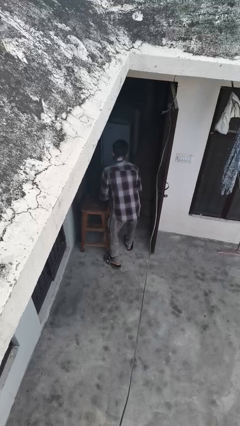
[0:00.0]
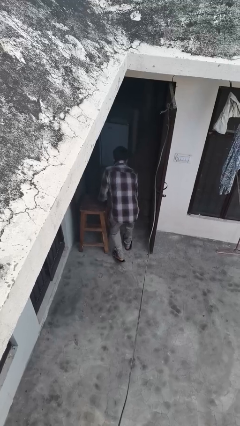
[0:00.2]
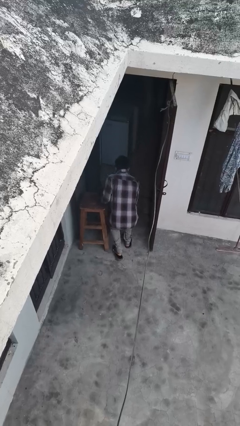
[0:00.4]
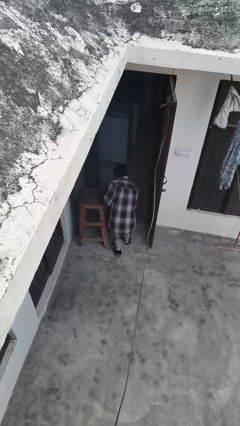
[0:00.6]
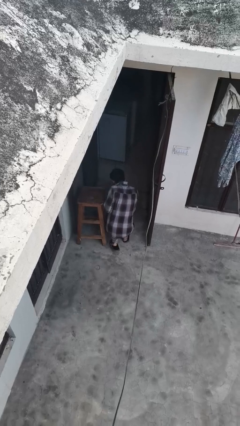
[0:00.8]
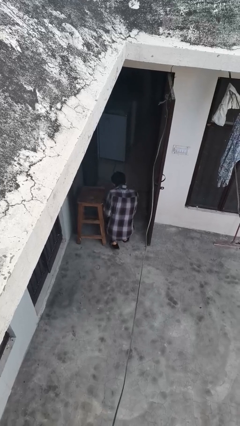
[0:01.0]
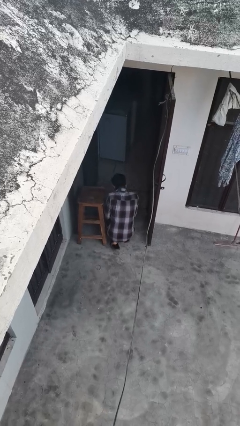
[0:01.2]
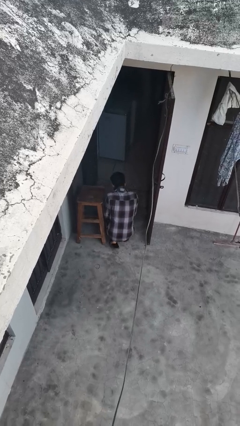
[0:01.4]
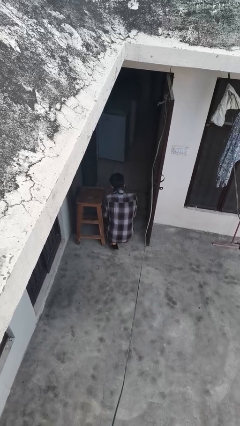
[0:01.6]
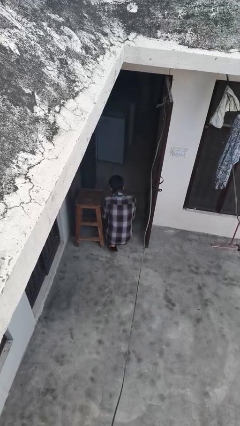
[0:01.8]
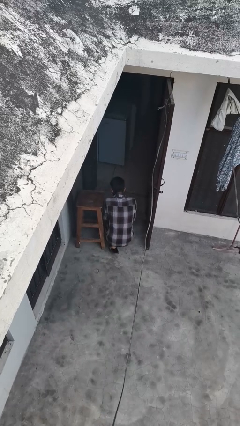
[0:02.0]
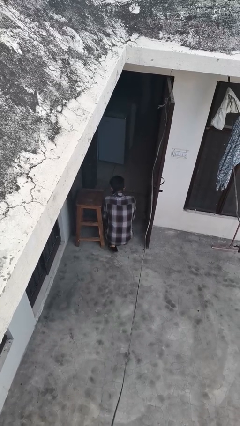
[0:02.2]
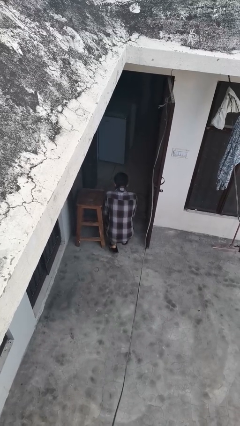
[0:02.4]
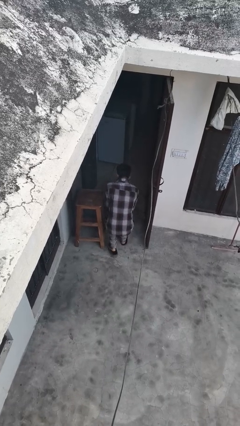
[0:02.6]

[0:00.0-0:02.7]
person trips on object on floor

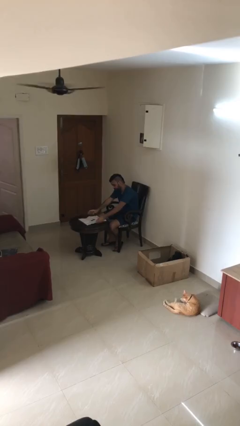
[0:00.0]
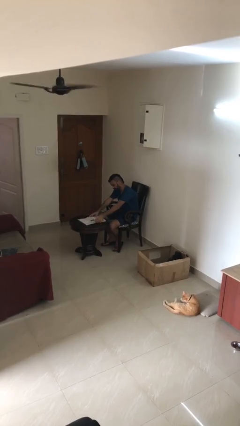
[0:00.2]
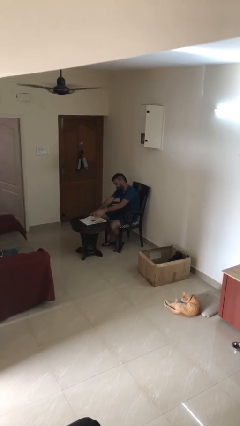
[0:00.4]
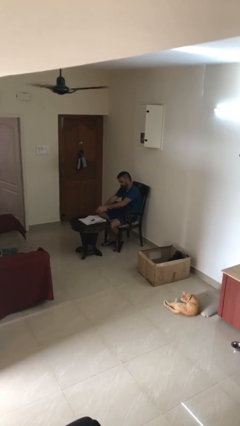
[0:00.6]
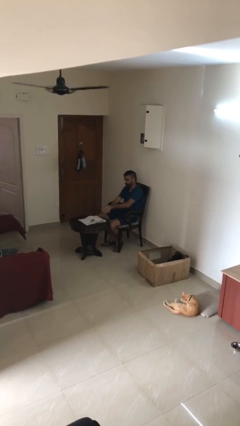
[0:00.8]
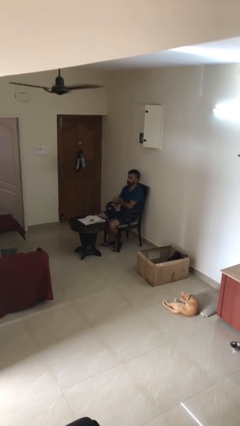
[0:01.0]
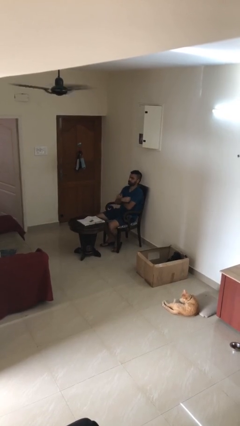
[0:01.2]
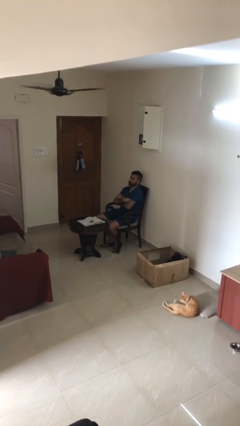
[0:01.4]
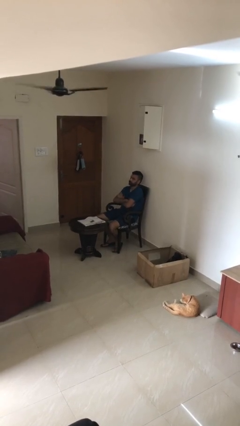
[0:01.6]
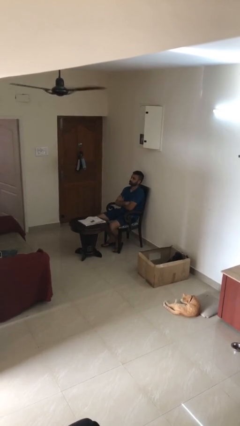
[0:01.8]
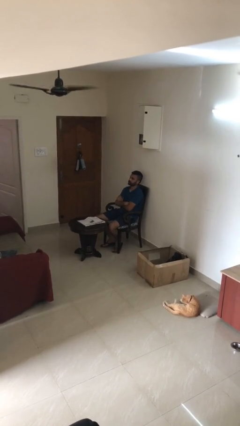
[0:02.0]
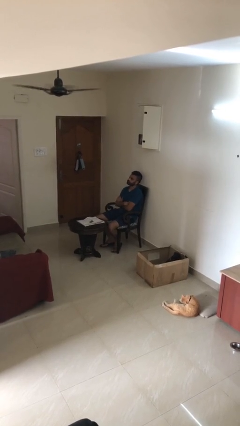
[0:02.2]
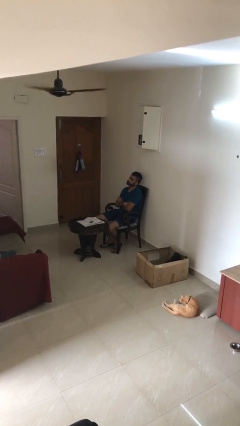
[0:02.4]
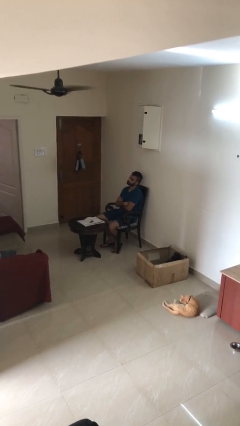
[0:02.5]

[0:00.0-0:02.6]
person puts down object on table

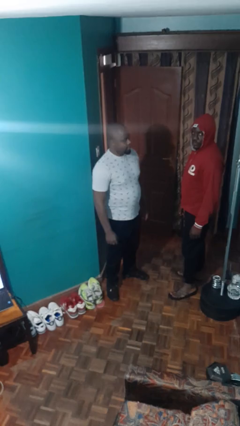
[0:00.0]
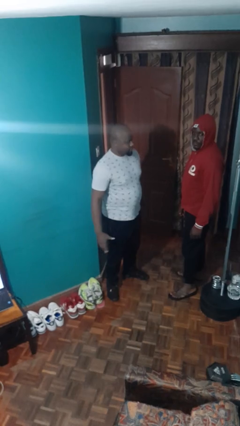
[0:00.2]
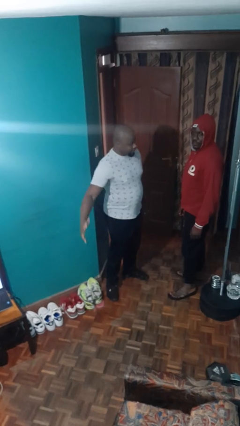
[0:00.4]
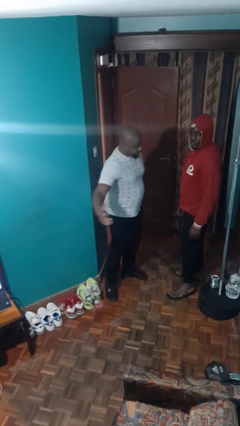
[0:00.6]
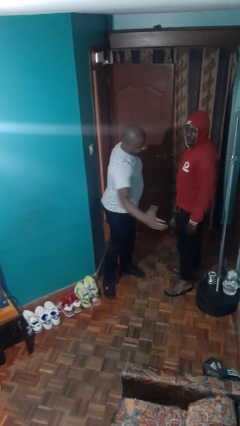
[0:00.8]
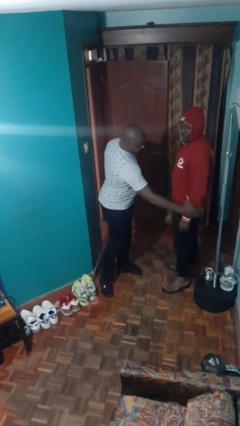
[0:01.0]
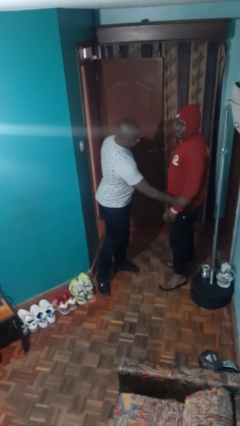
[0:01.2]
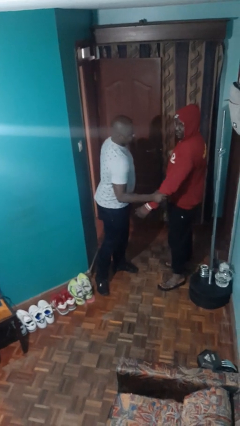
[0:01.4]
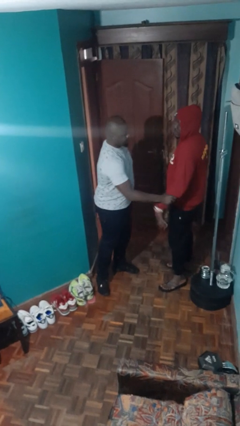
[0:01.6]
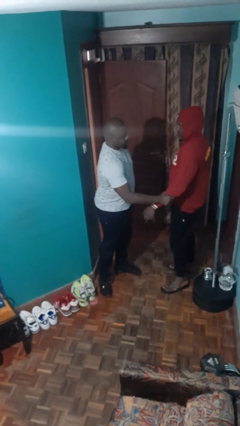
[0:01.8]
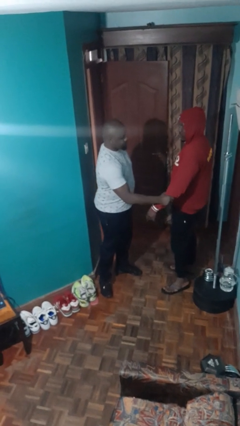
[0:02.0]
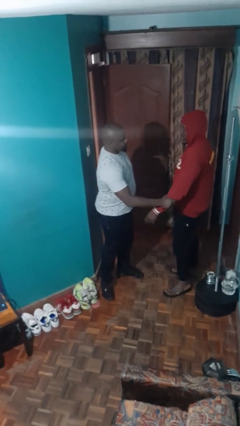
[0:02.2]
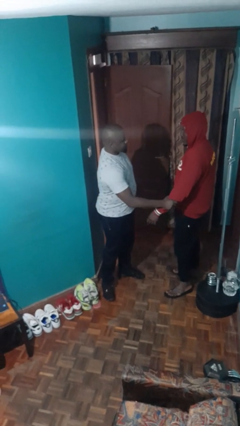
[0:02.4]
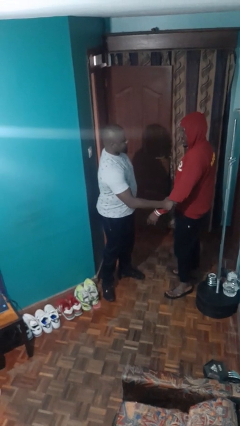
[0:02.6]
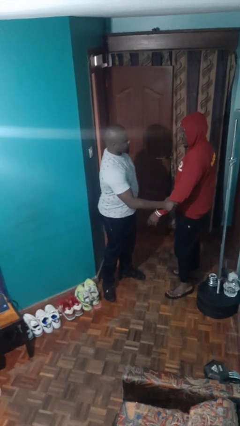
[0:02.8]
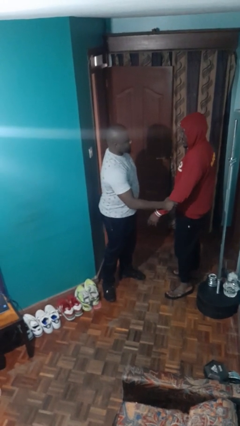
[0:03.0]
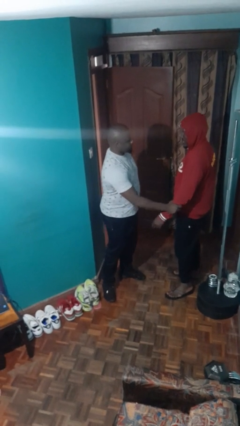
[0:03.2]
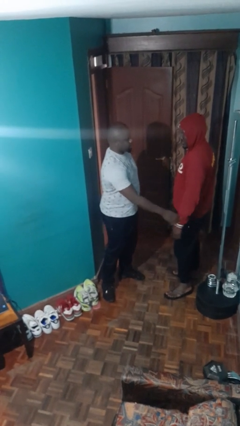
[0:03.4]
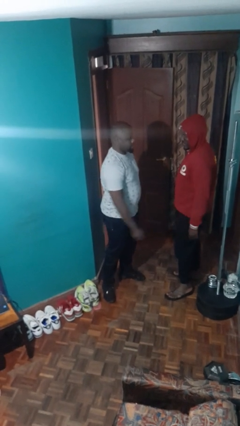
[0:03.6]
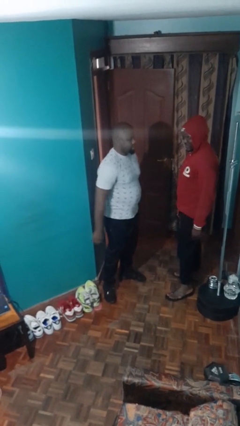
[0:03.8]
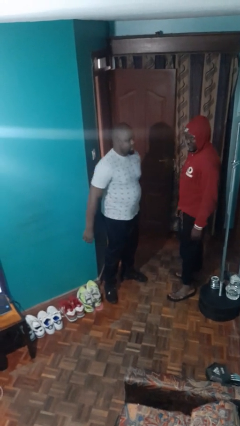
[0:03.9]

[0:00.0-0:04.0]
person grabs person by forearm

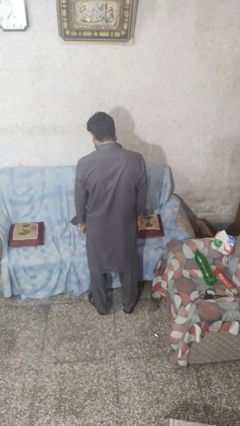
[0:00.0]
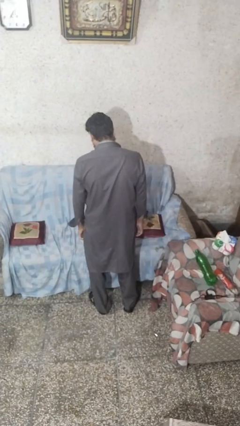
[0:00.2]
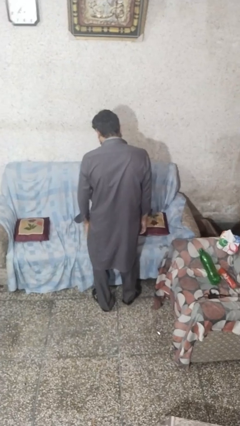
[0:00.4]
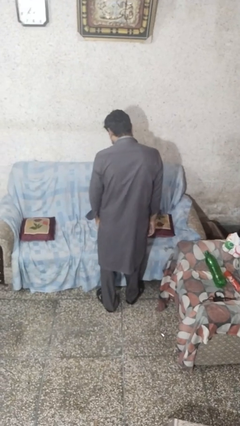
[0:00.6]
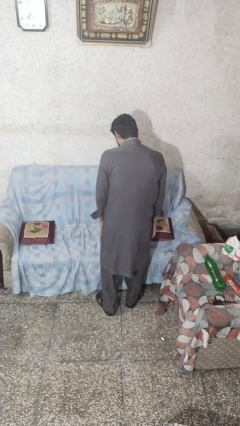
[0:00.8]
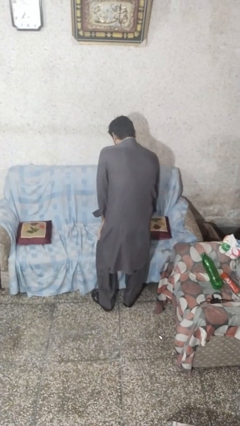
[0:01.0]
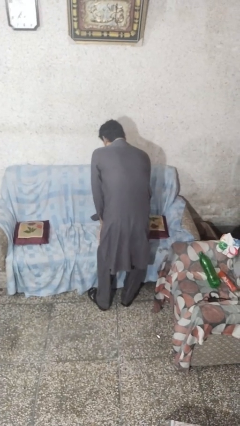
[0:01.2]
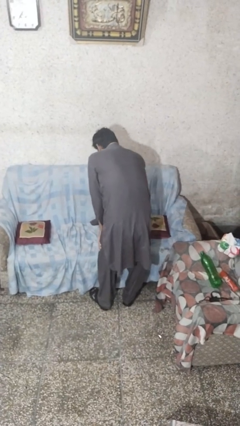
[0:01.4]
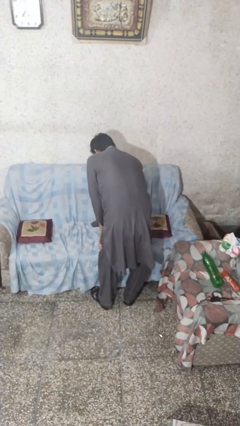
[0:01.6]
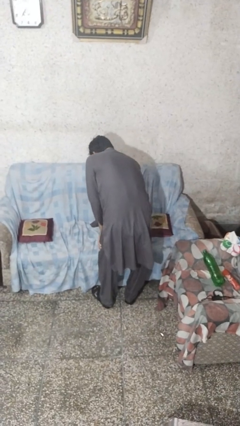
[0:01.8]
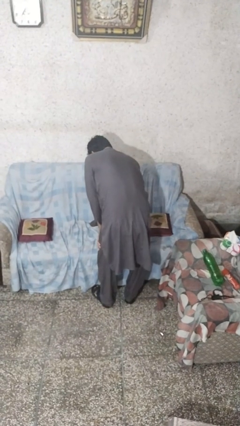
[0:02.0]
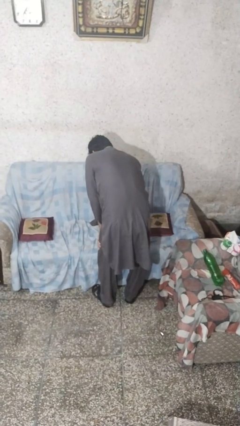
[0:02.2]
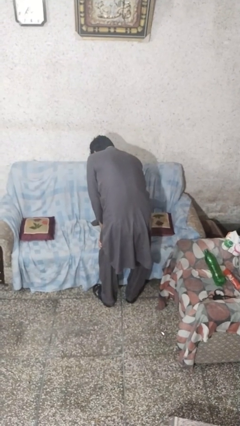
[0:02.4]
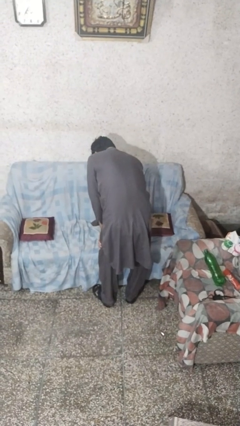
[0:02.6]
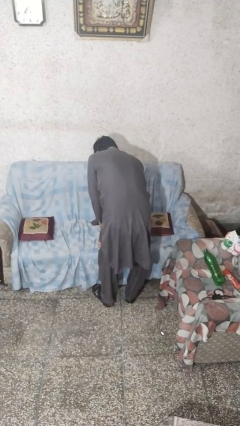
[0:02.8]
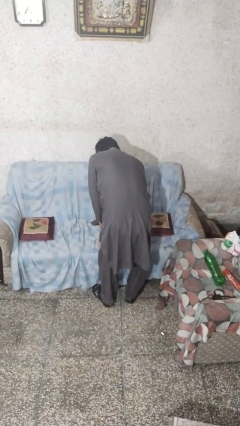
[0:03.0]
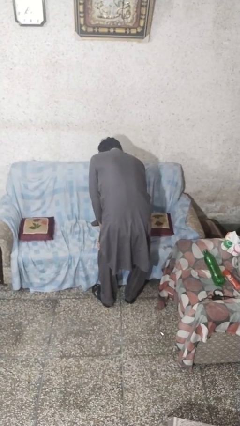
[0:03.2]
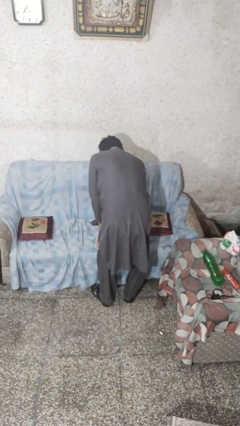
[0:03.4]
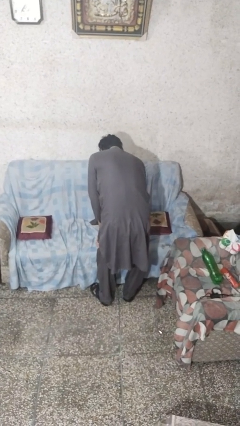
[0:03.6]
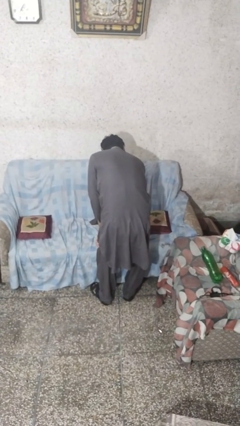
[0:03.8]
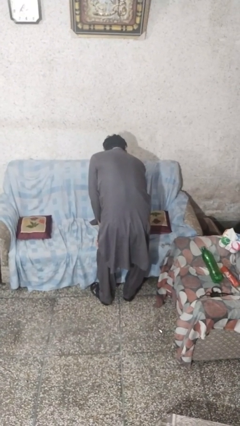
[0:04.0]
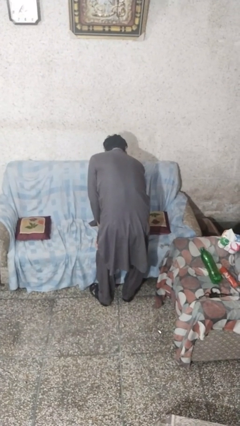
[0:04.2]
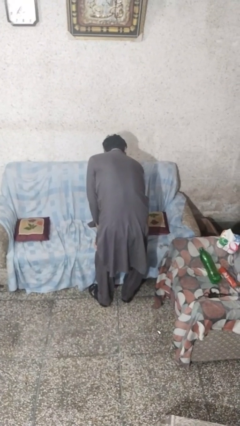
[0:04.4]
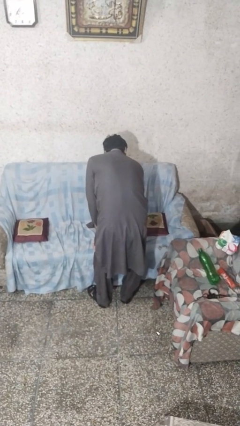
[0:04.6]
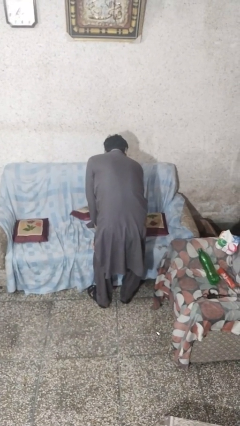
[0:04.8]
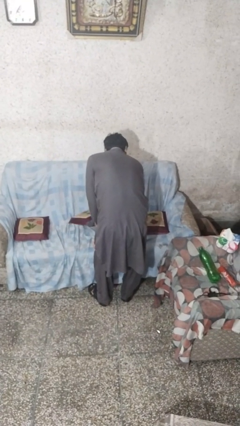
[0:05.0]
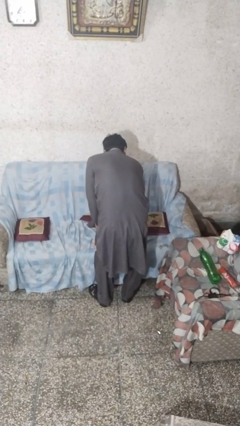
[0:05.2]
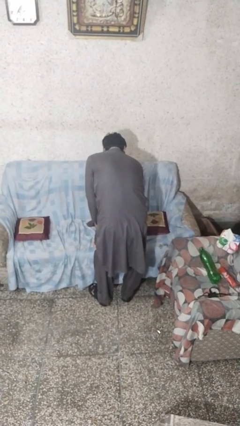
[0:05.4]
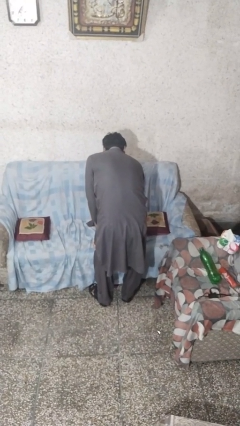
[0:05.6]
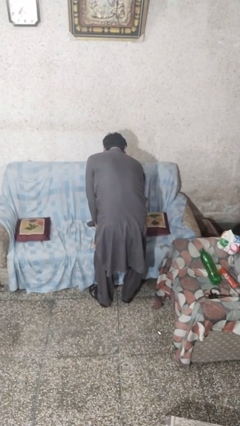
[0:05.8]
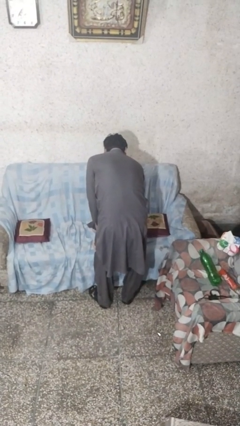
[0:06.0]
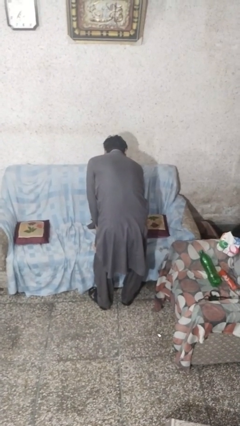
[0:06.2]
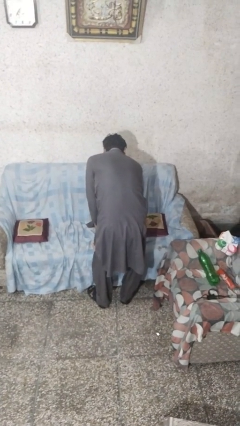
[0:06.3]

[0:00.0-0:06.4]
person searches in couch

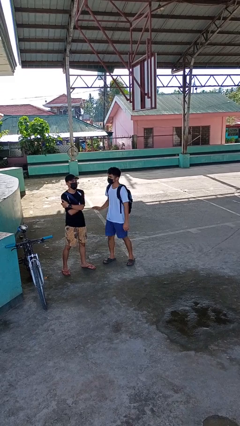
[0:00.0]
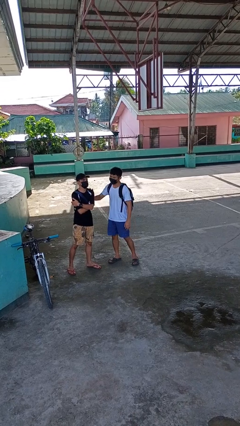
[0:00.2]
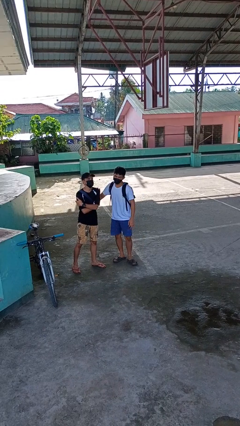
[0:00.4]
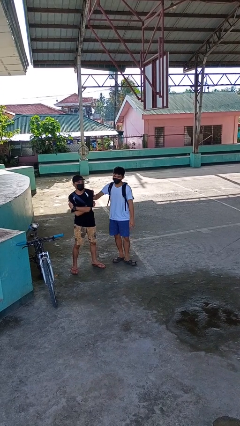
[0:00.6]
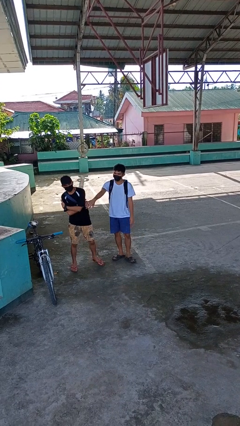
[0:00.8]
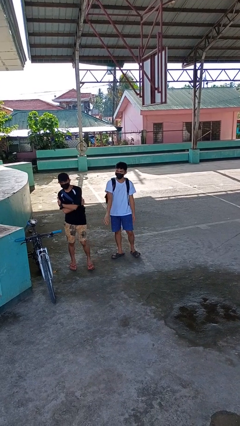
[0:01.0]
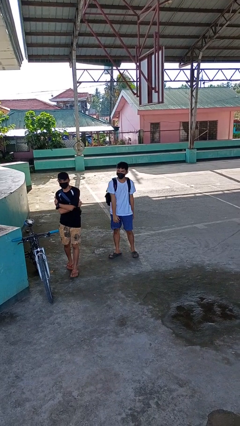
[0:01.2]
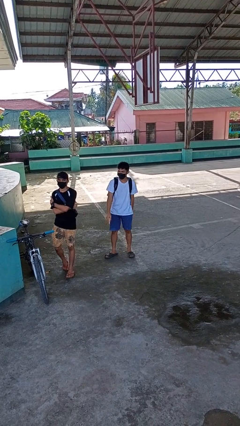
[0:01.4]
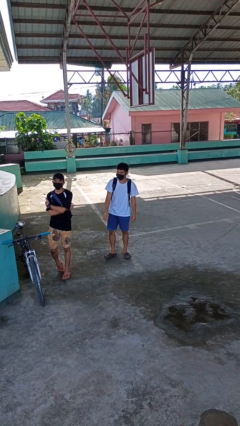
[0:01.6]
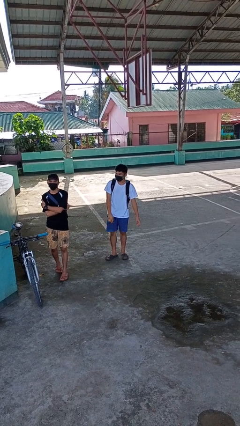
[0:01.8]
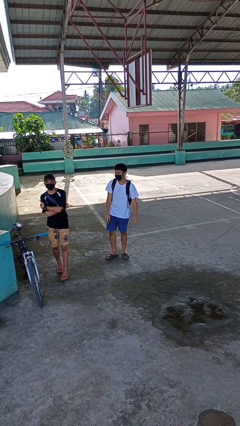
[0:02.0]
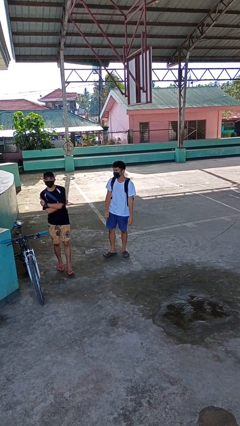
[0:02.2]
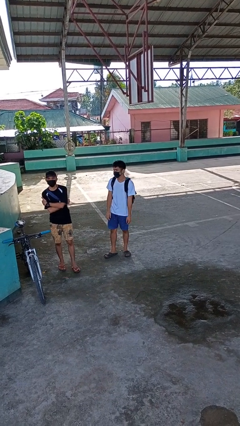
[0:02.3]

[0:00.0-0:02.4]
person shoves person
